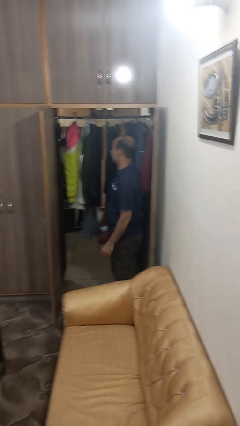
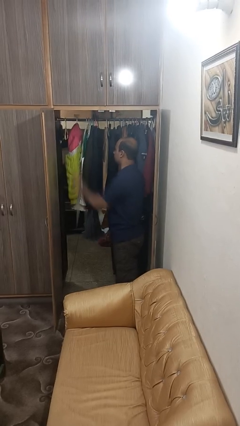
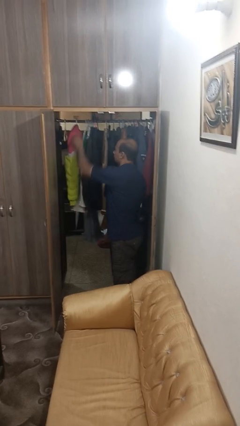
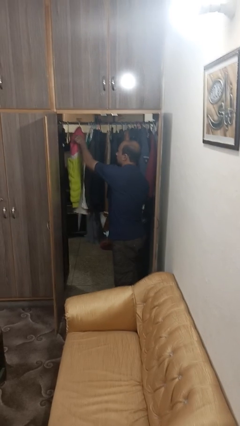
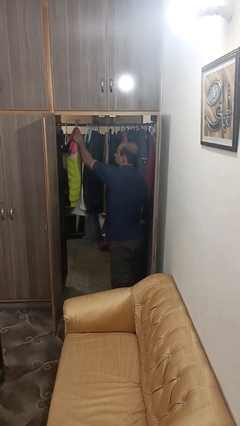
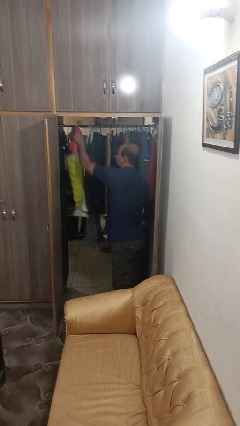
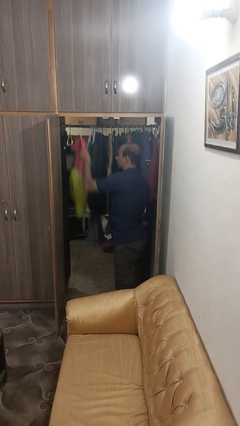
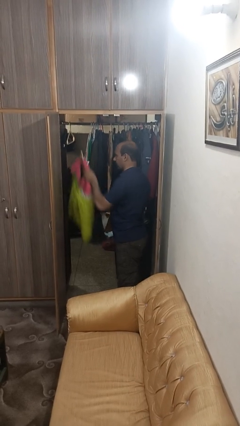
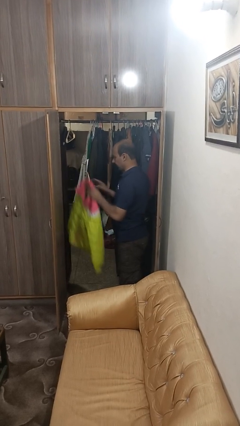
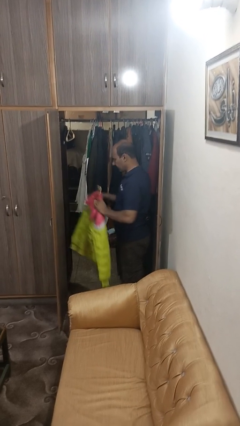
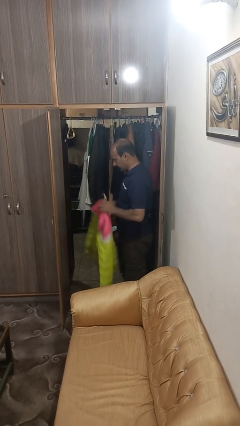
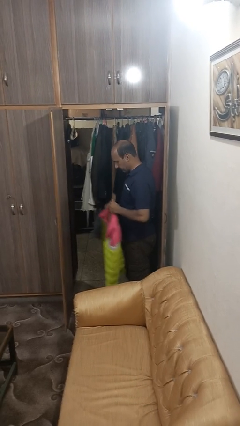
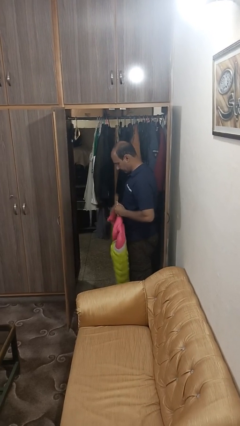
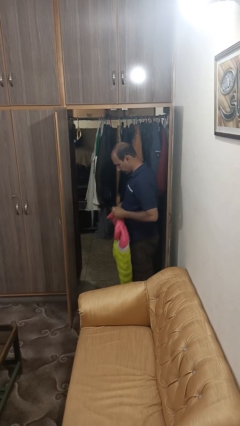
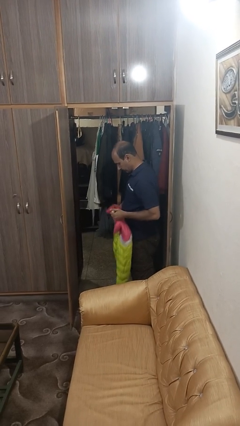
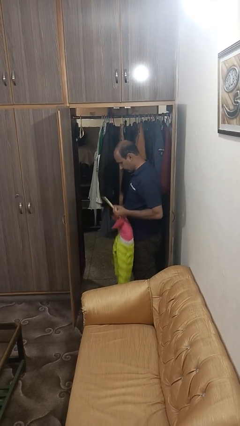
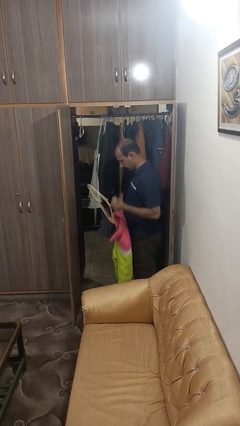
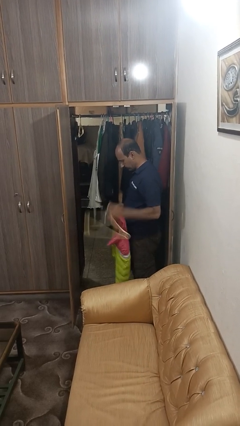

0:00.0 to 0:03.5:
person takes clothes from closet

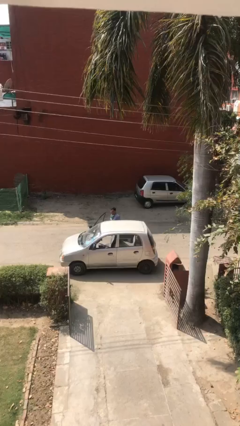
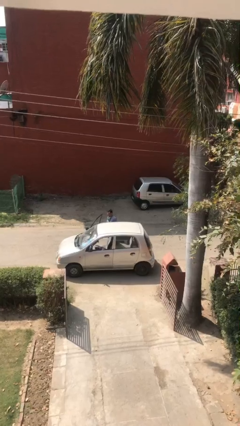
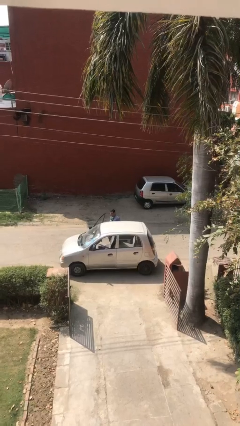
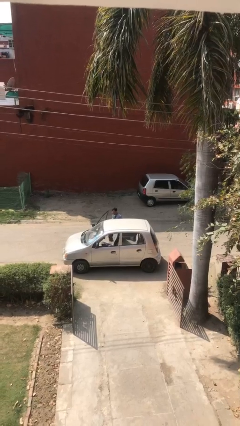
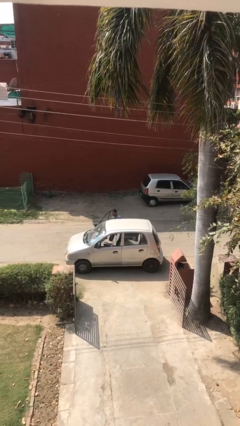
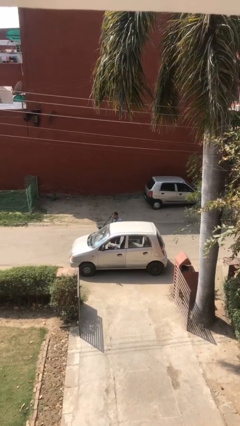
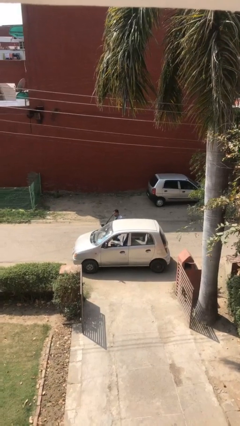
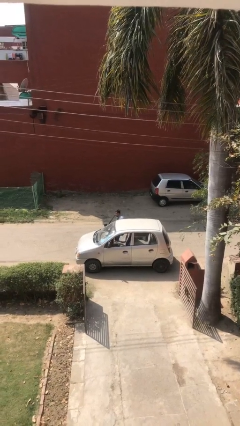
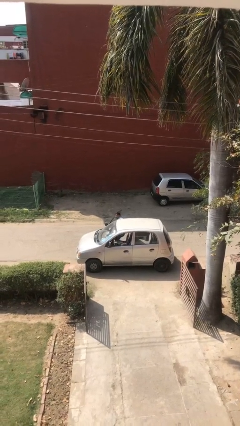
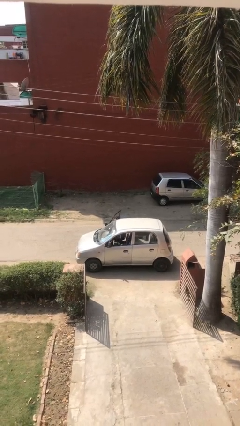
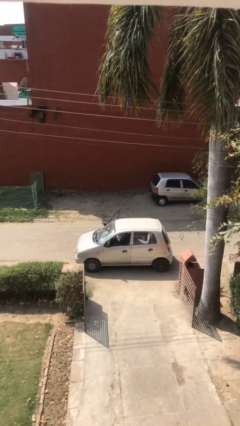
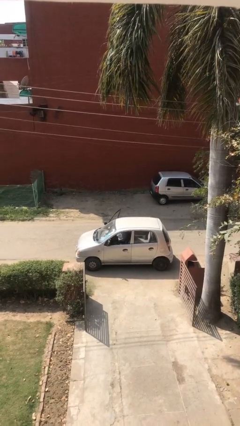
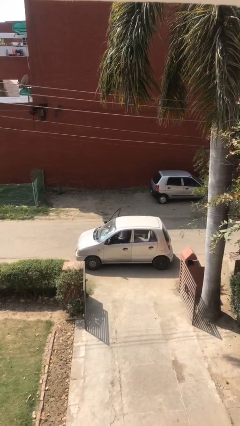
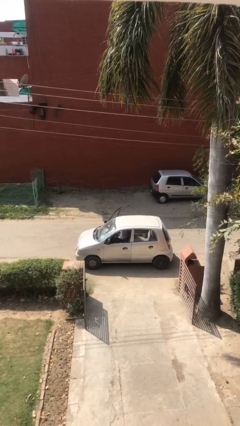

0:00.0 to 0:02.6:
person enters car

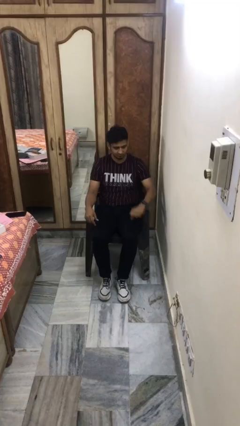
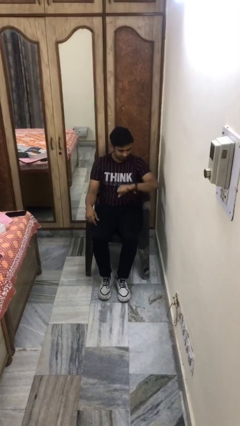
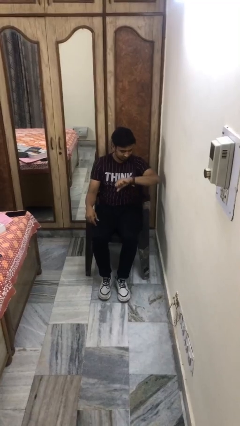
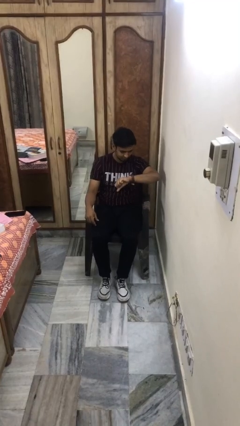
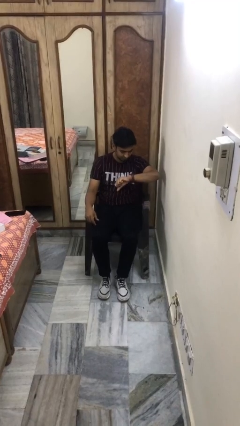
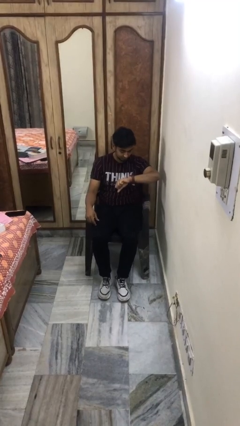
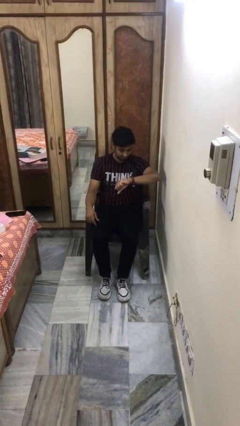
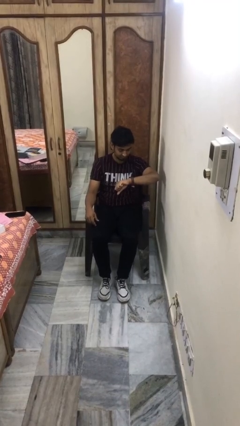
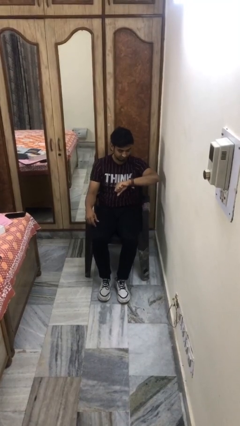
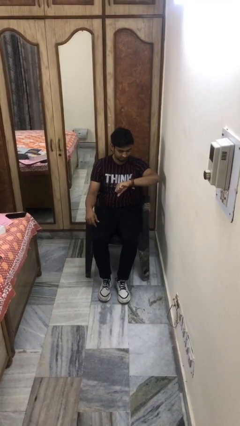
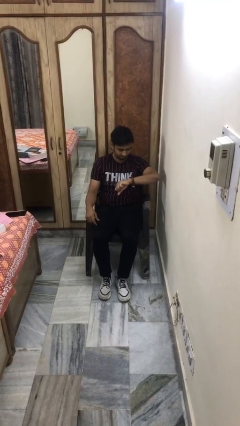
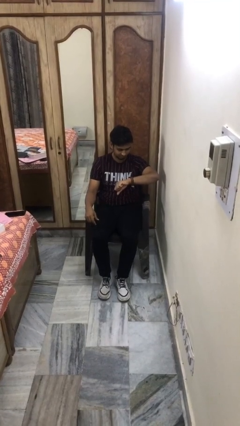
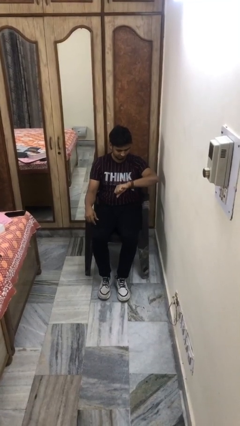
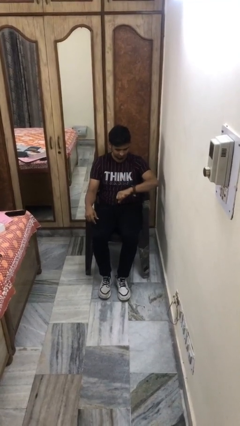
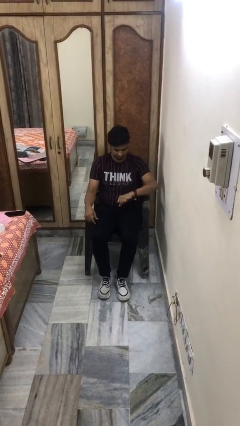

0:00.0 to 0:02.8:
person looks at wristwatch

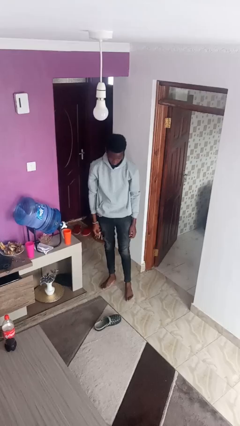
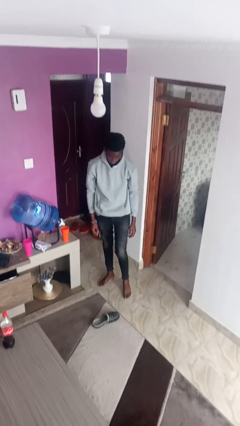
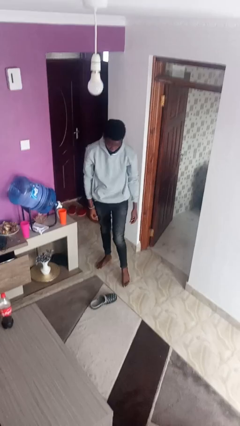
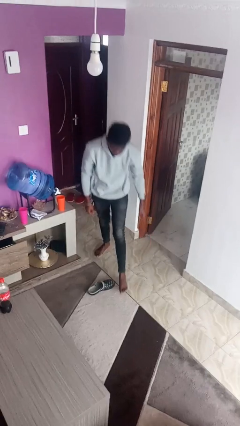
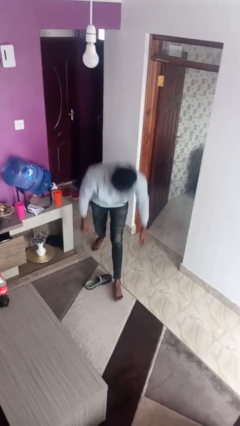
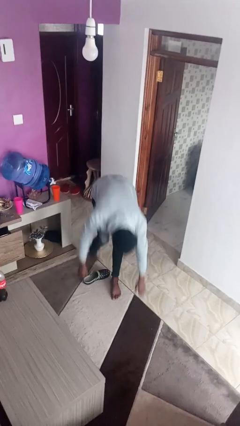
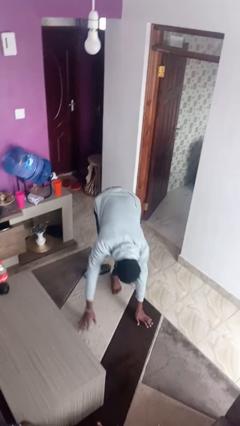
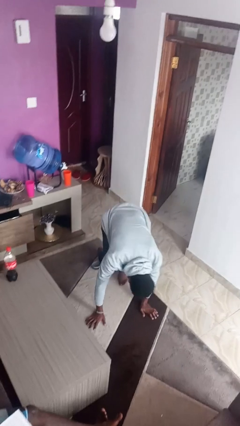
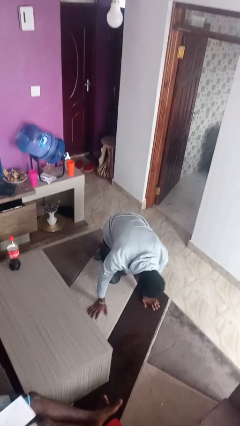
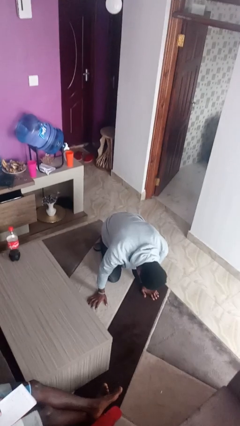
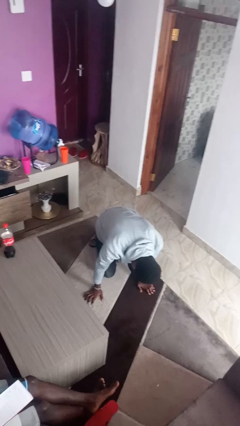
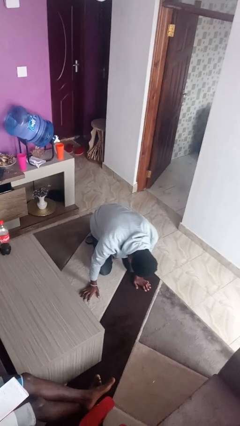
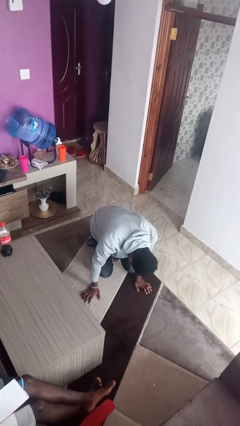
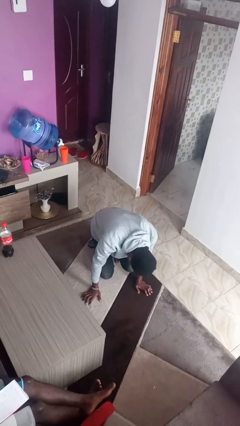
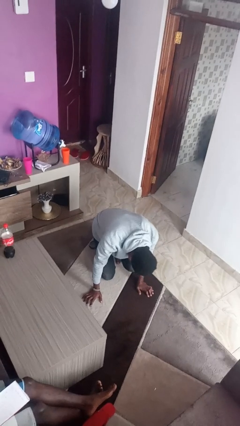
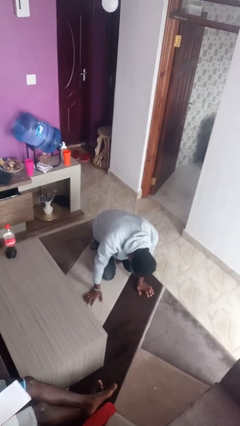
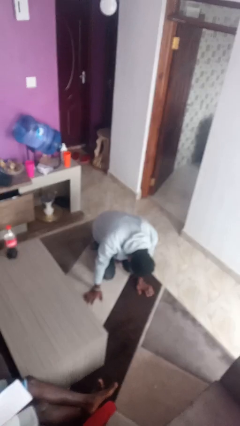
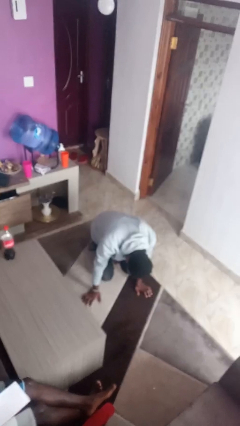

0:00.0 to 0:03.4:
person trips on object on floor

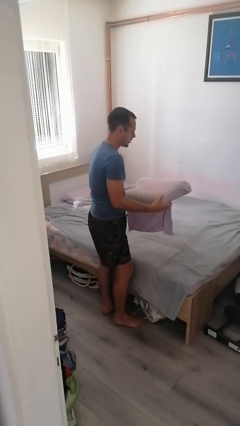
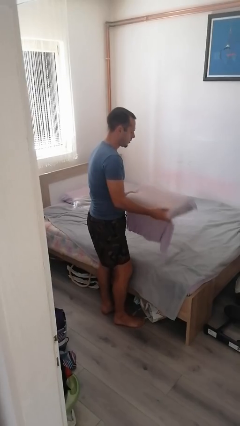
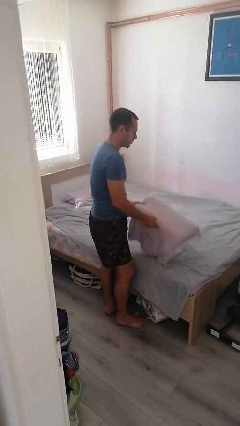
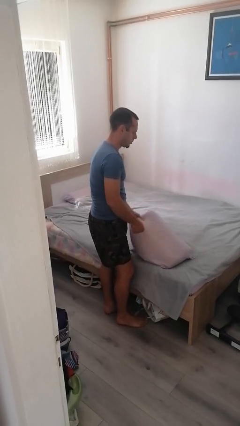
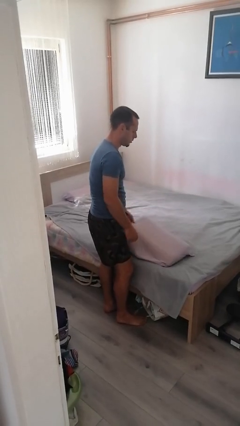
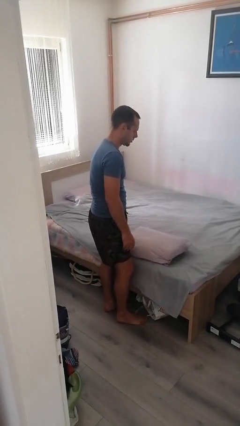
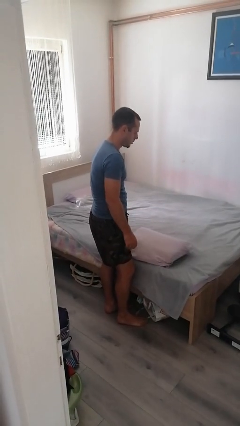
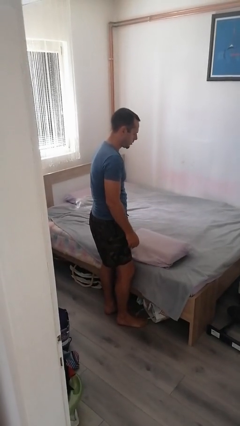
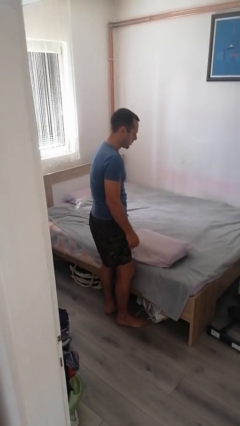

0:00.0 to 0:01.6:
person puts down object on bed

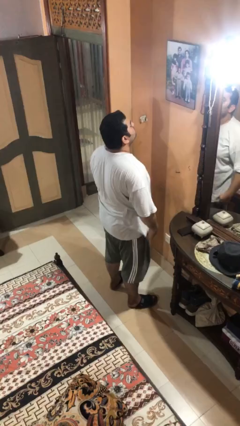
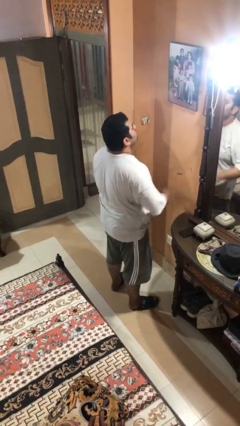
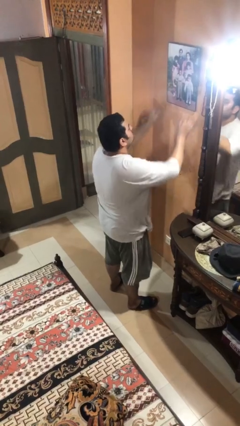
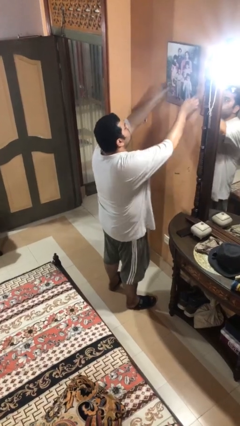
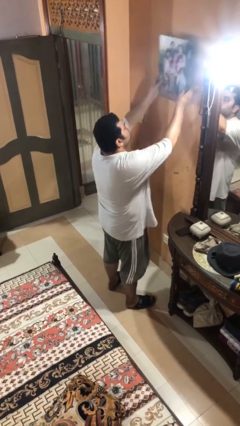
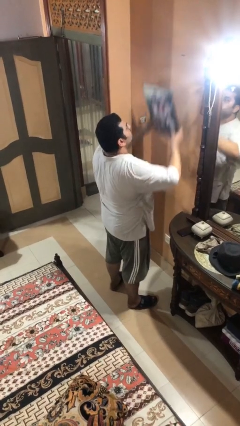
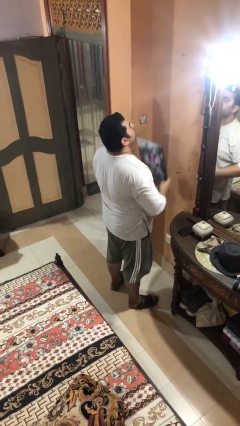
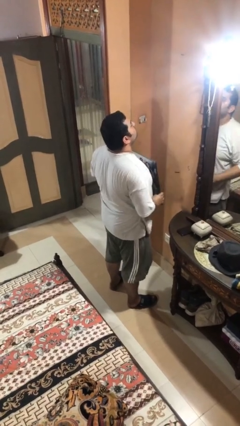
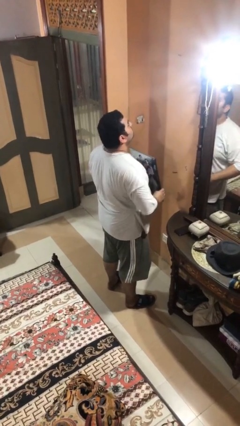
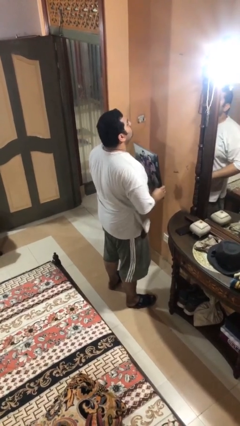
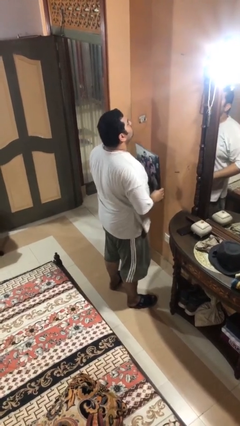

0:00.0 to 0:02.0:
person takes down picture frame

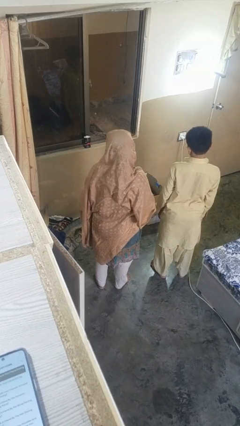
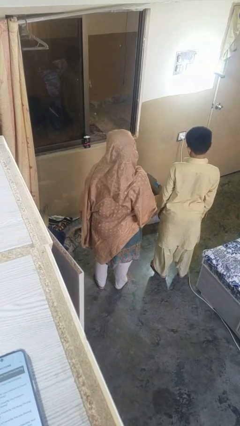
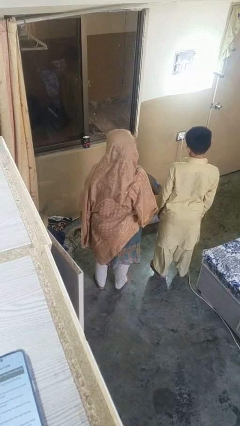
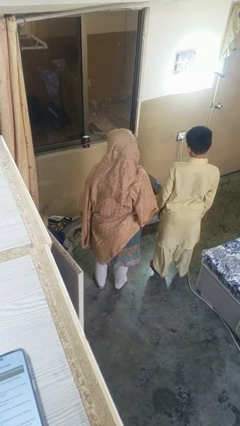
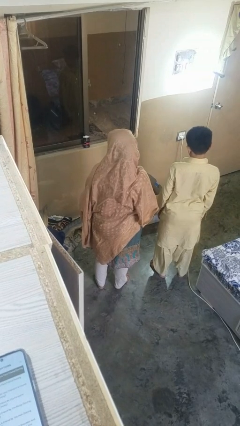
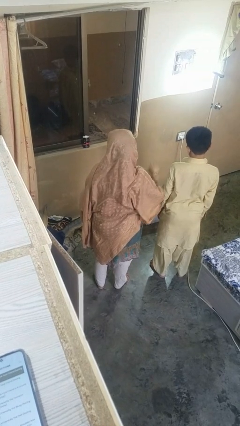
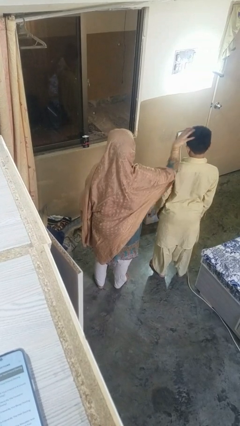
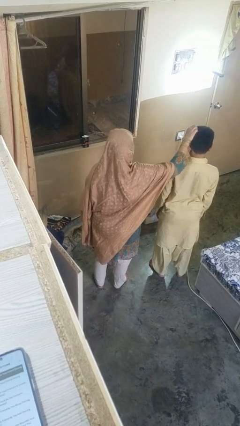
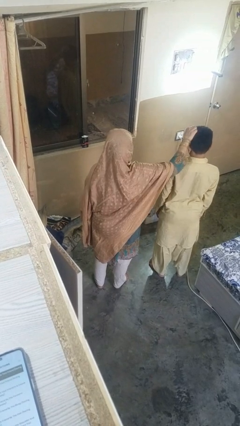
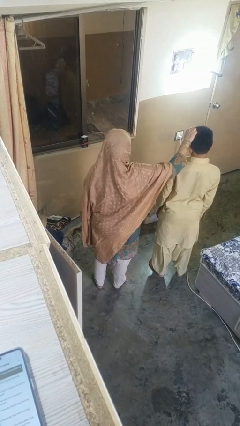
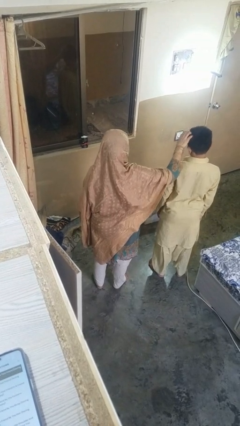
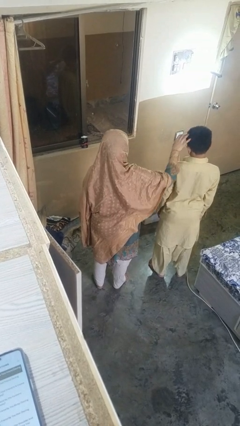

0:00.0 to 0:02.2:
person grabs person by hair
